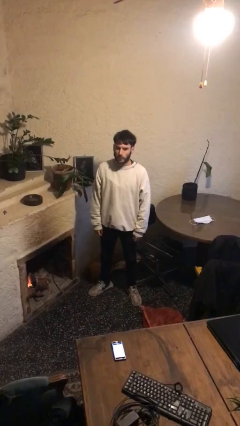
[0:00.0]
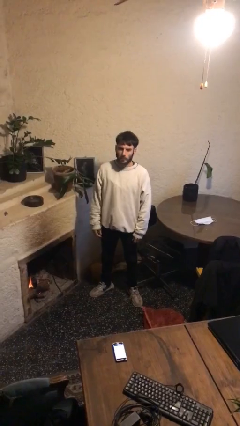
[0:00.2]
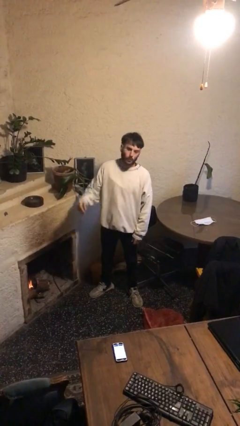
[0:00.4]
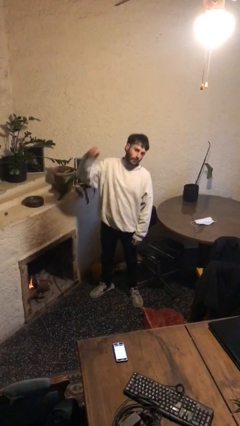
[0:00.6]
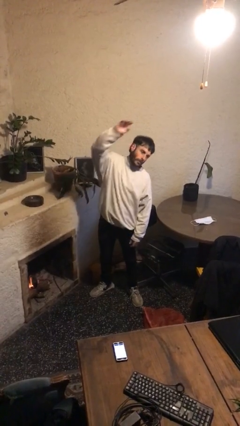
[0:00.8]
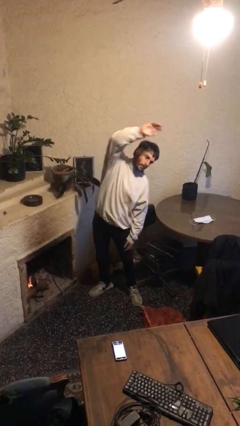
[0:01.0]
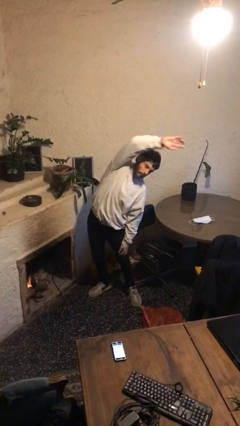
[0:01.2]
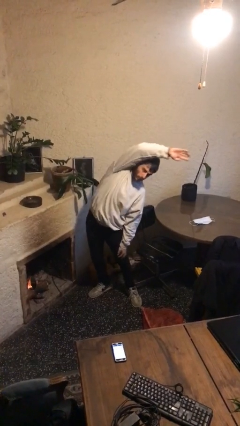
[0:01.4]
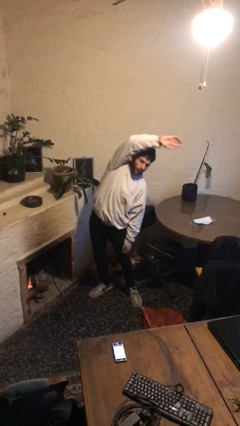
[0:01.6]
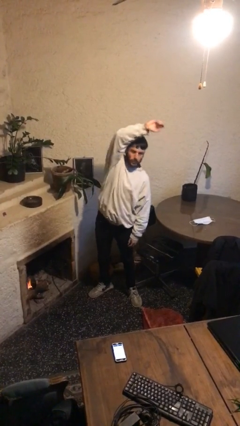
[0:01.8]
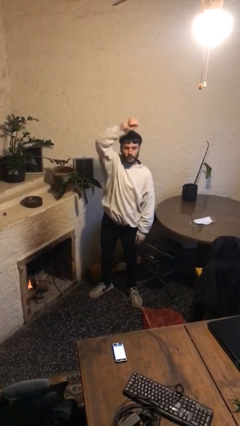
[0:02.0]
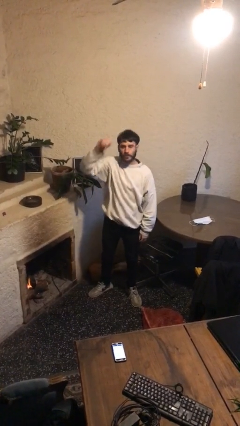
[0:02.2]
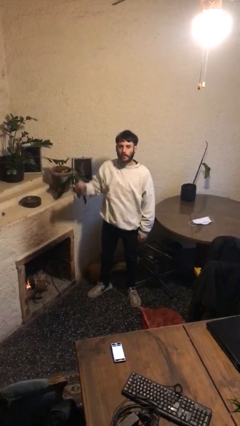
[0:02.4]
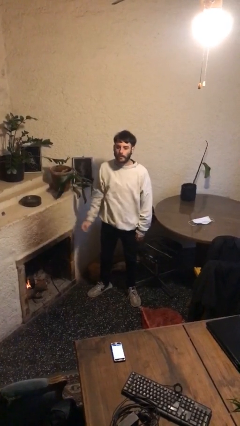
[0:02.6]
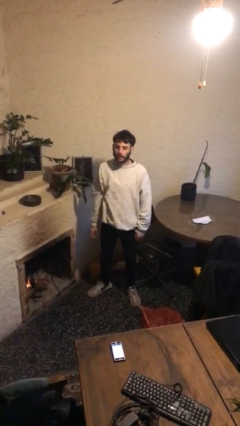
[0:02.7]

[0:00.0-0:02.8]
person stretches arms to side

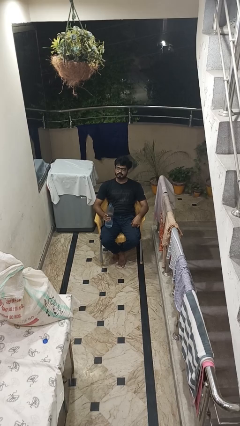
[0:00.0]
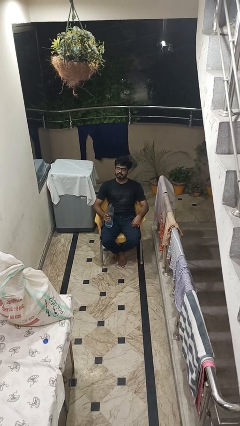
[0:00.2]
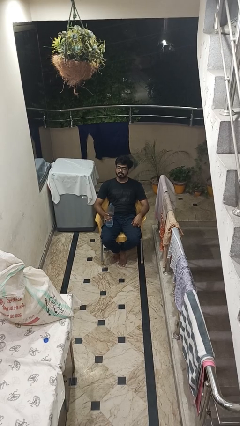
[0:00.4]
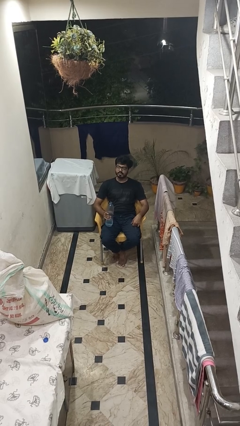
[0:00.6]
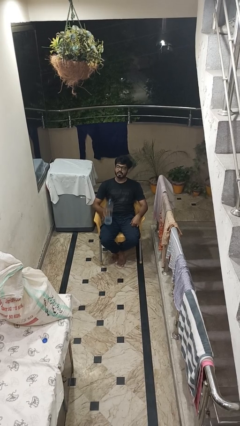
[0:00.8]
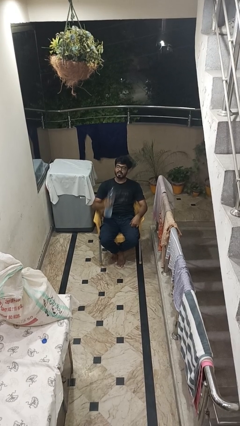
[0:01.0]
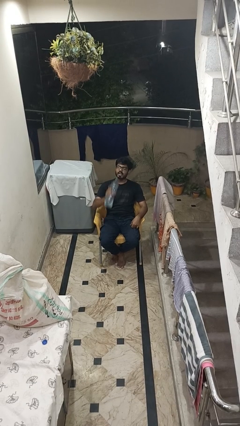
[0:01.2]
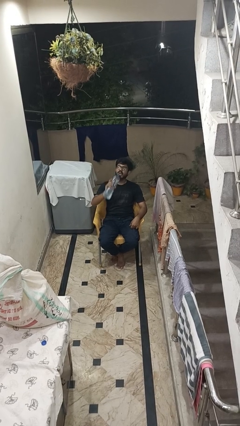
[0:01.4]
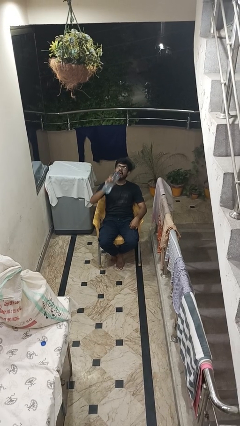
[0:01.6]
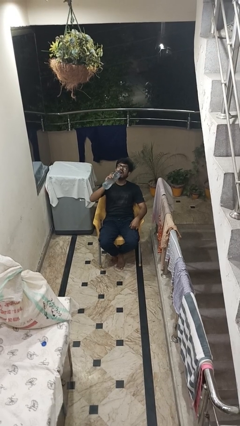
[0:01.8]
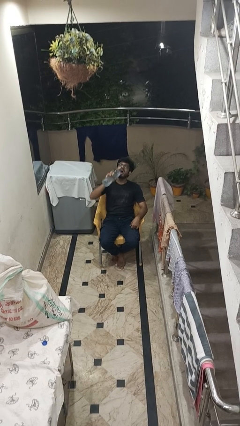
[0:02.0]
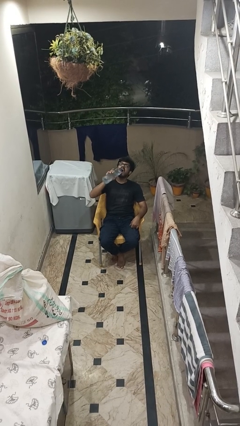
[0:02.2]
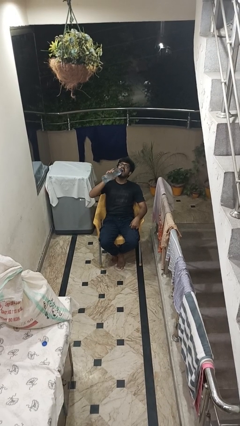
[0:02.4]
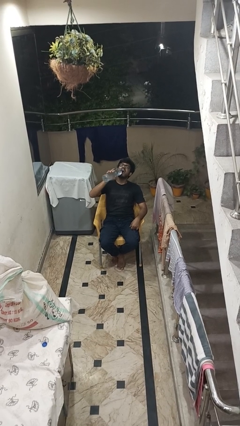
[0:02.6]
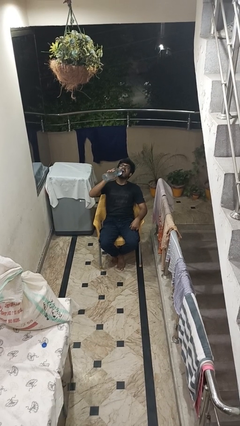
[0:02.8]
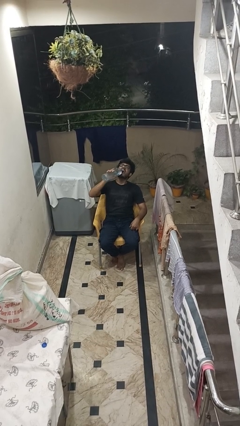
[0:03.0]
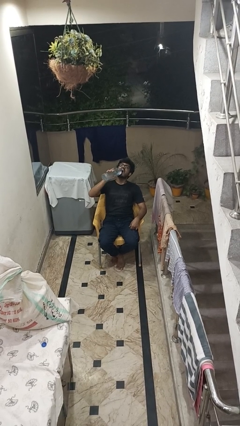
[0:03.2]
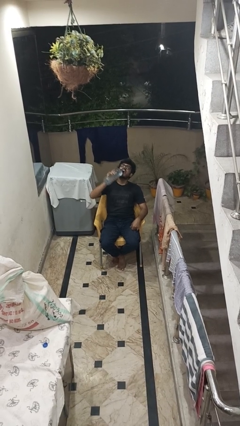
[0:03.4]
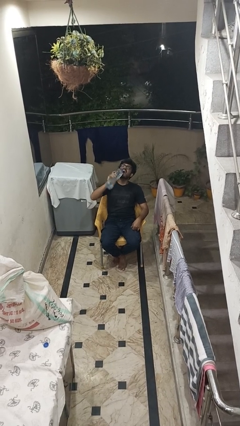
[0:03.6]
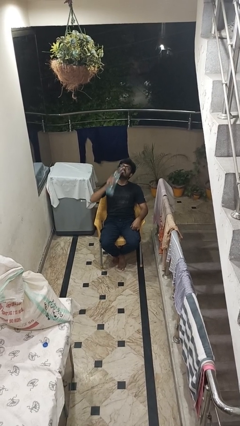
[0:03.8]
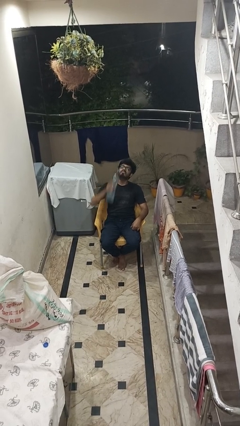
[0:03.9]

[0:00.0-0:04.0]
person drinks from bottle

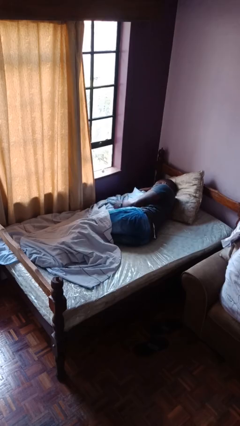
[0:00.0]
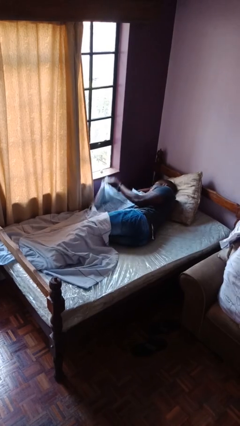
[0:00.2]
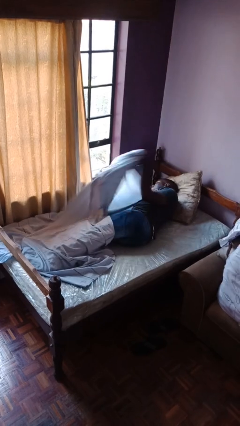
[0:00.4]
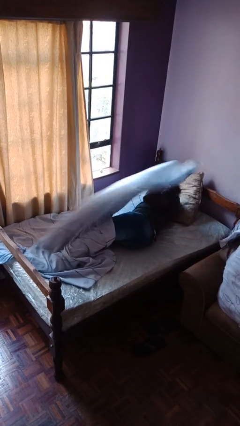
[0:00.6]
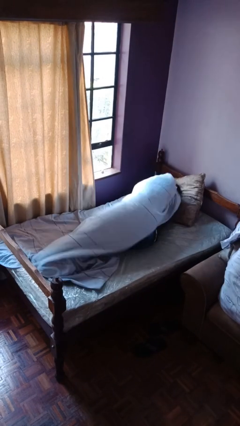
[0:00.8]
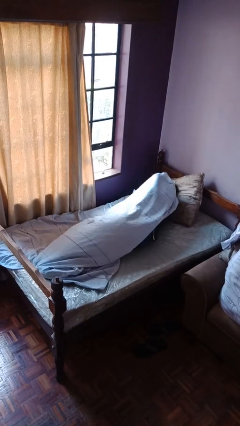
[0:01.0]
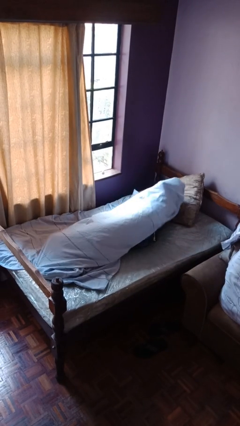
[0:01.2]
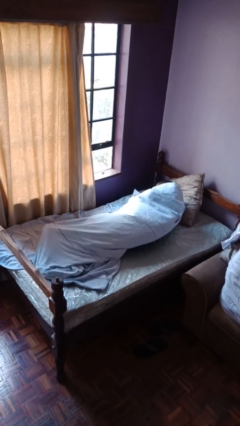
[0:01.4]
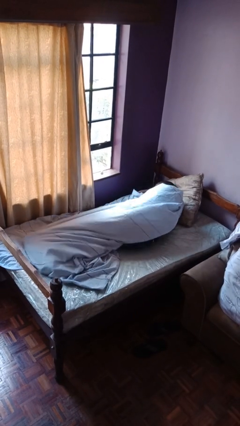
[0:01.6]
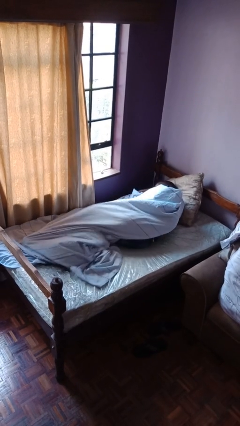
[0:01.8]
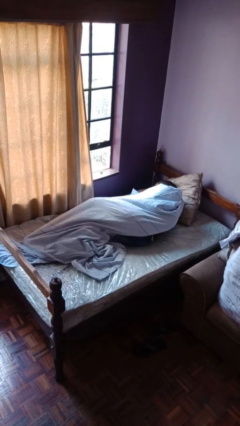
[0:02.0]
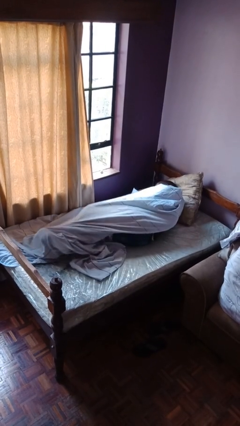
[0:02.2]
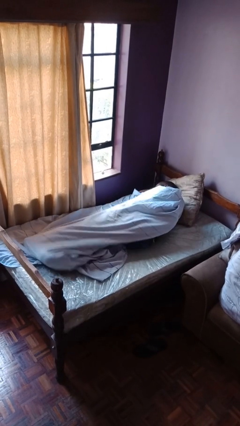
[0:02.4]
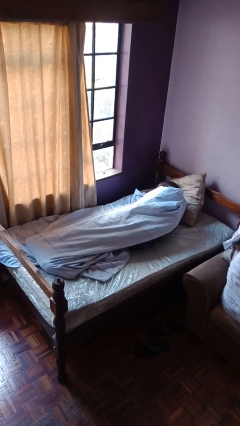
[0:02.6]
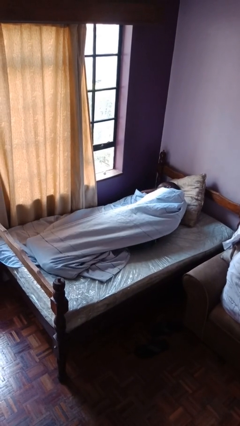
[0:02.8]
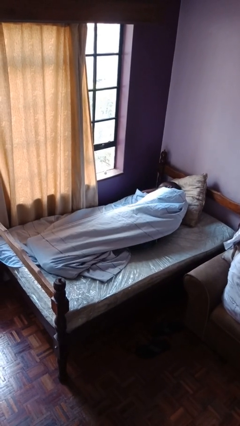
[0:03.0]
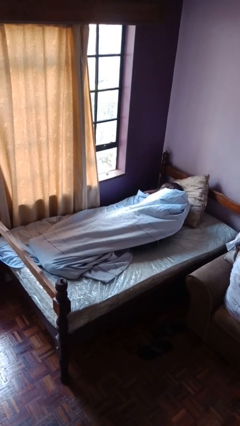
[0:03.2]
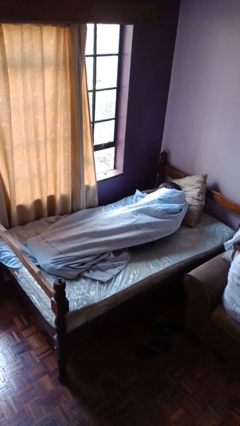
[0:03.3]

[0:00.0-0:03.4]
person covers with bedsheets

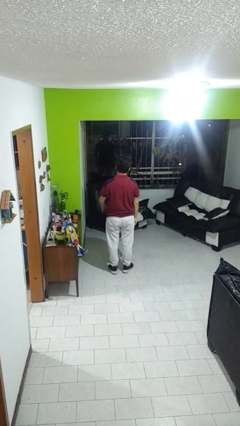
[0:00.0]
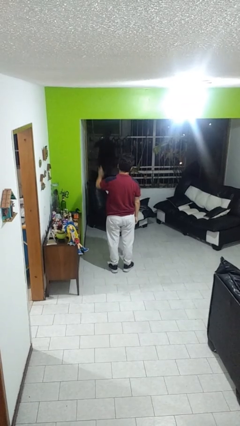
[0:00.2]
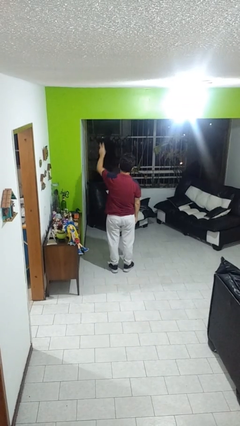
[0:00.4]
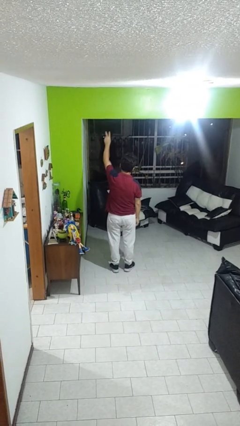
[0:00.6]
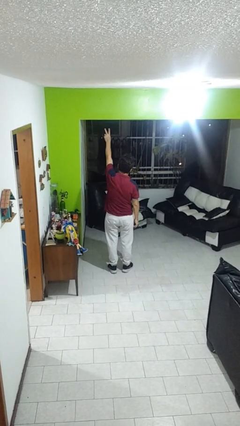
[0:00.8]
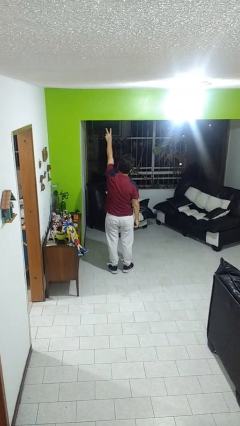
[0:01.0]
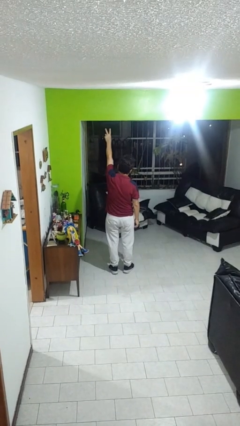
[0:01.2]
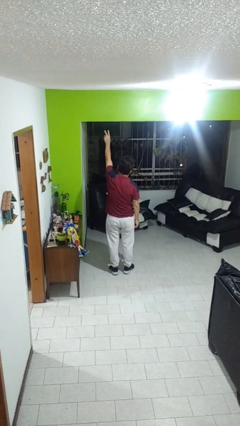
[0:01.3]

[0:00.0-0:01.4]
person gestures peace

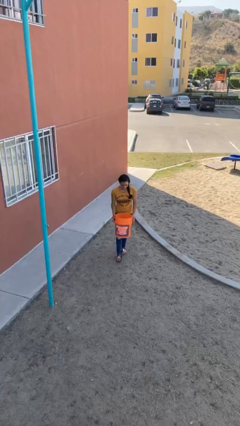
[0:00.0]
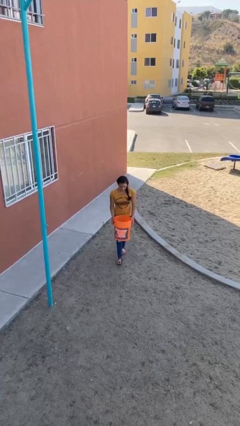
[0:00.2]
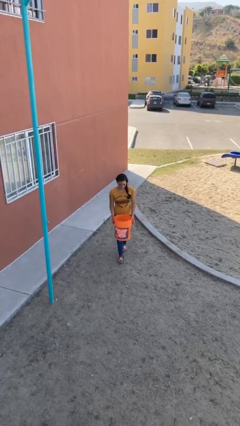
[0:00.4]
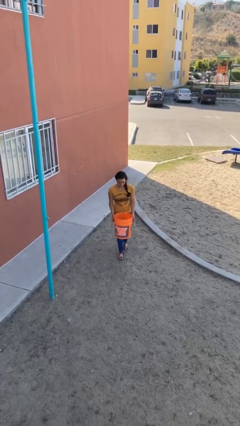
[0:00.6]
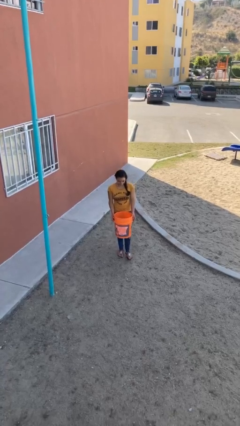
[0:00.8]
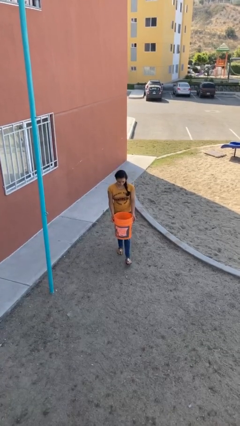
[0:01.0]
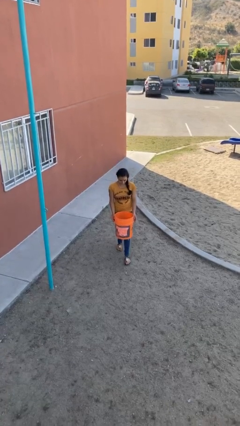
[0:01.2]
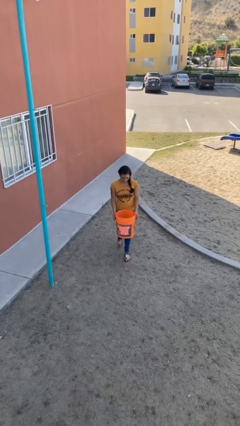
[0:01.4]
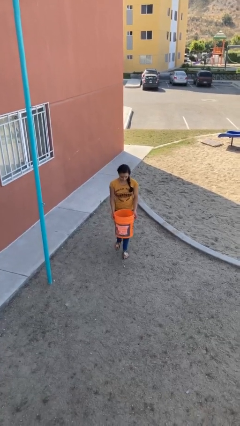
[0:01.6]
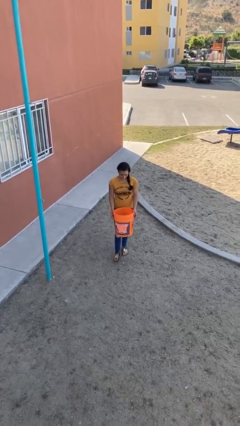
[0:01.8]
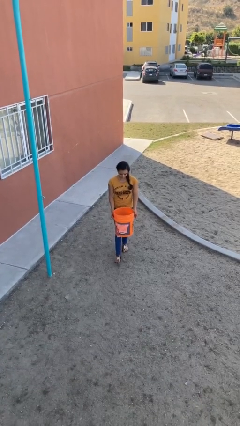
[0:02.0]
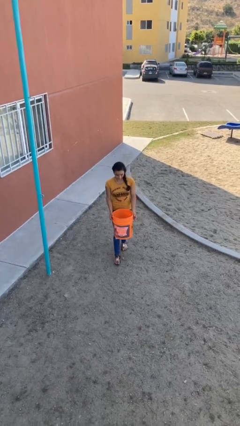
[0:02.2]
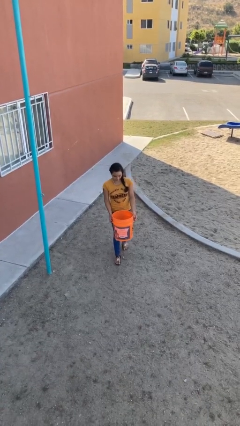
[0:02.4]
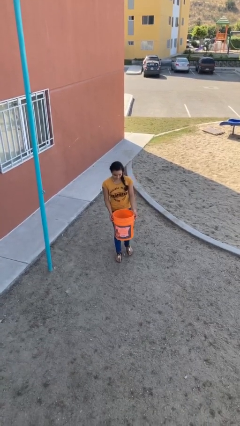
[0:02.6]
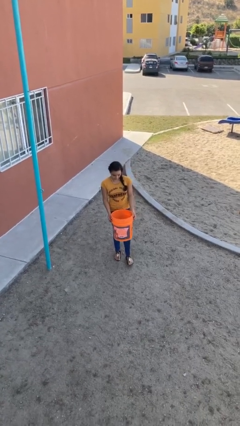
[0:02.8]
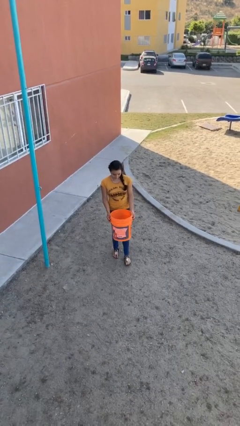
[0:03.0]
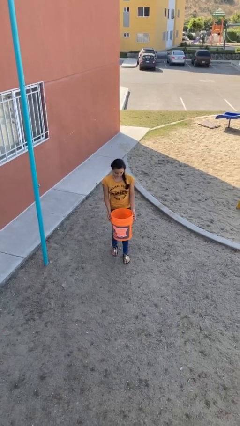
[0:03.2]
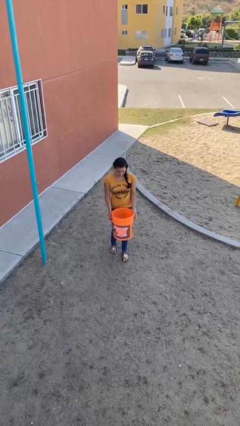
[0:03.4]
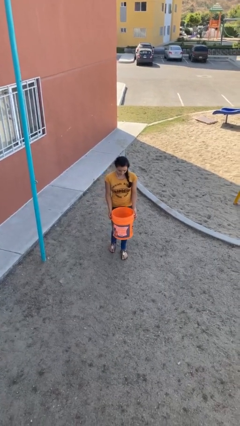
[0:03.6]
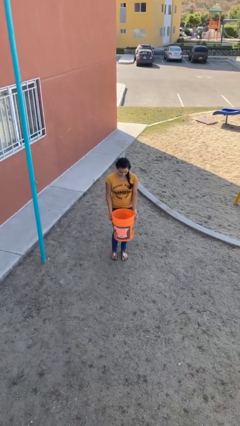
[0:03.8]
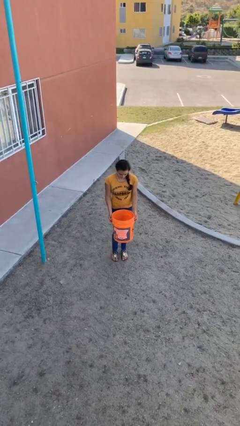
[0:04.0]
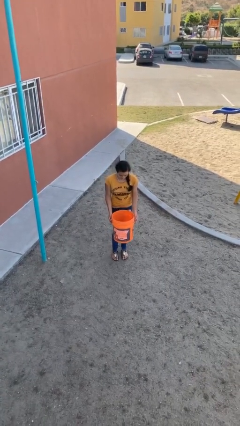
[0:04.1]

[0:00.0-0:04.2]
person carries heavy object

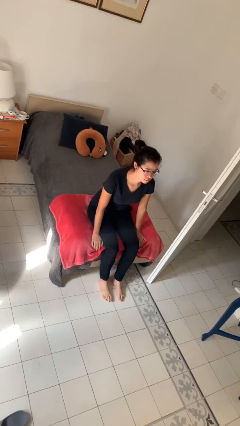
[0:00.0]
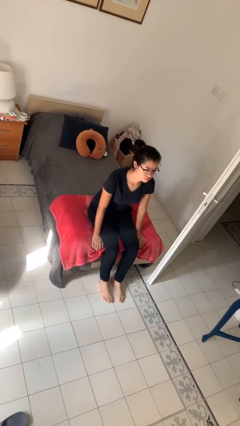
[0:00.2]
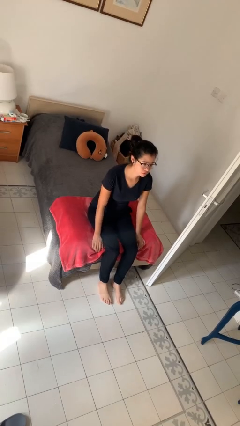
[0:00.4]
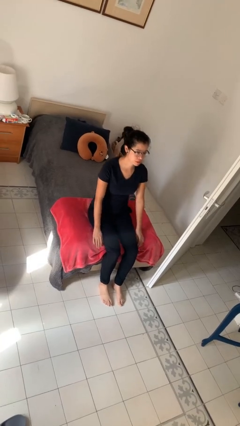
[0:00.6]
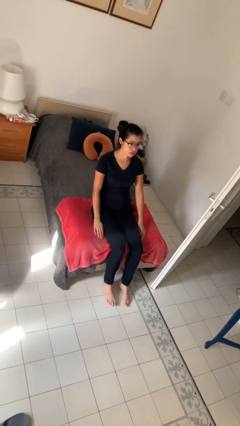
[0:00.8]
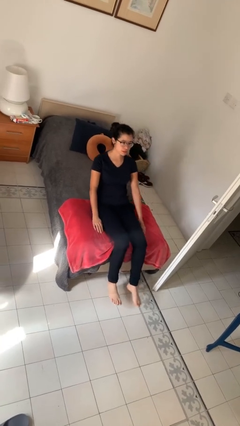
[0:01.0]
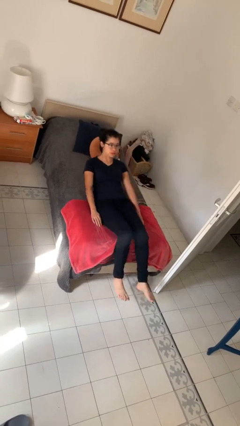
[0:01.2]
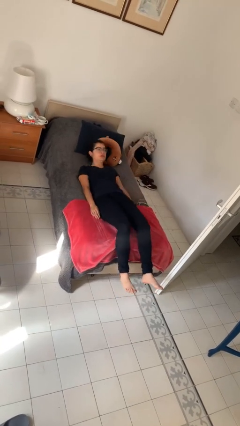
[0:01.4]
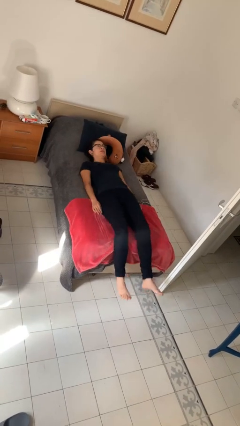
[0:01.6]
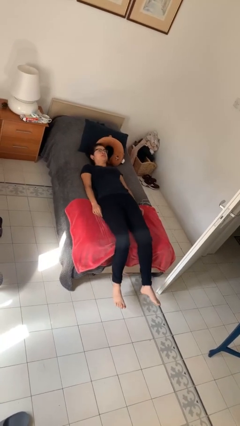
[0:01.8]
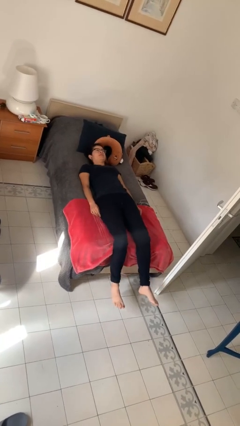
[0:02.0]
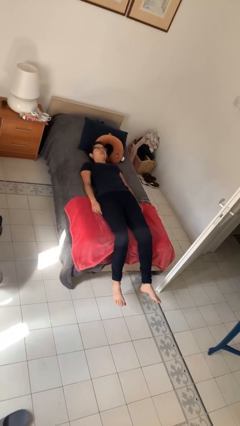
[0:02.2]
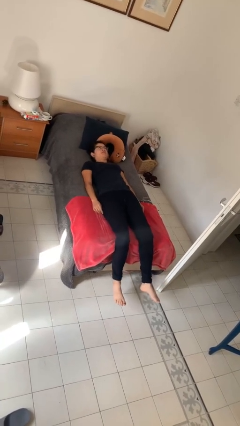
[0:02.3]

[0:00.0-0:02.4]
person lies down on bed
